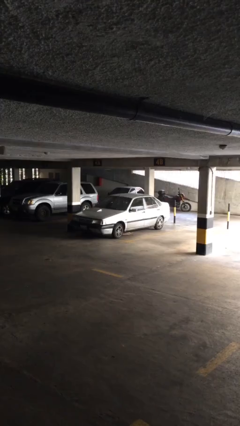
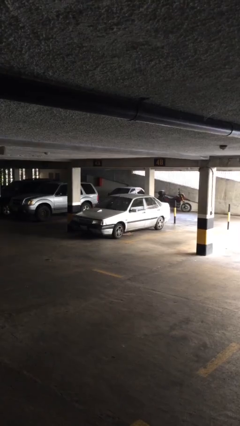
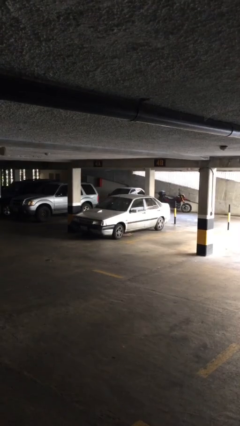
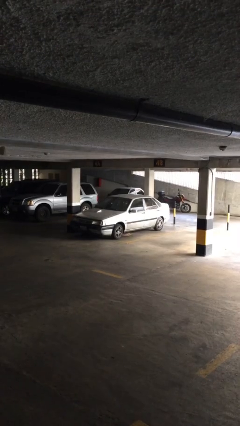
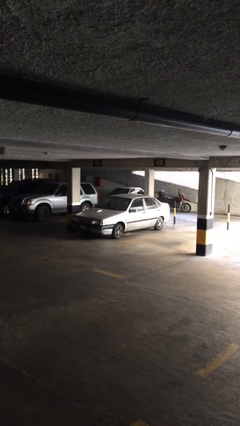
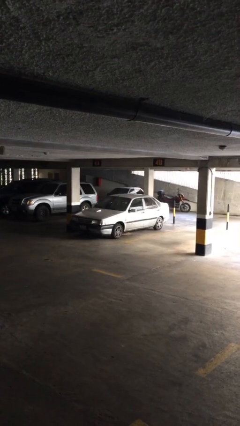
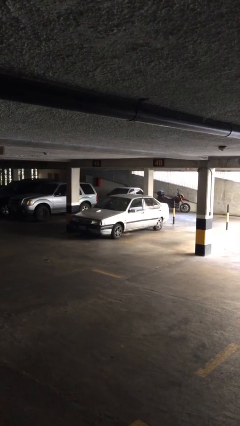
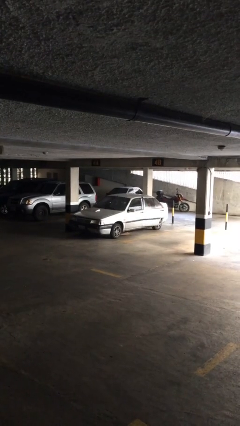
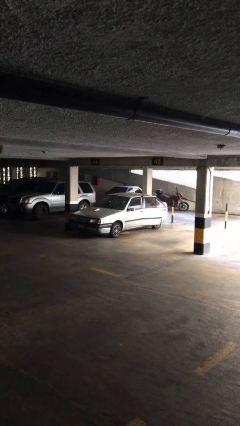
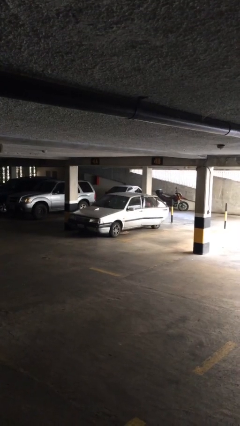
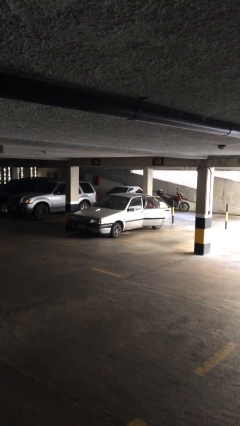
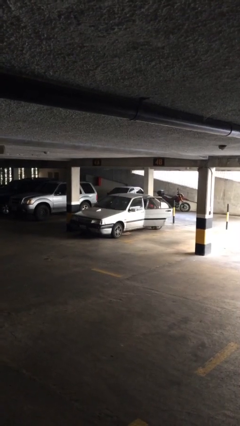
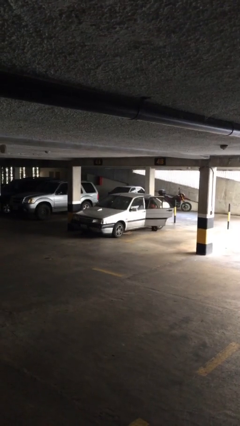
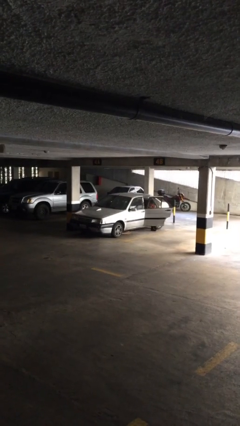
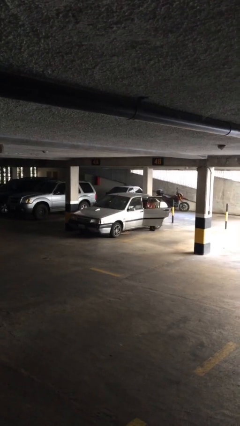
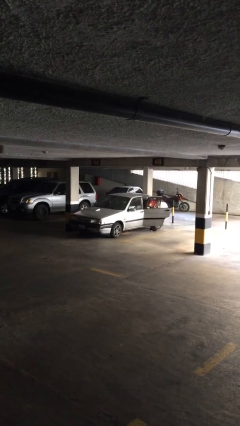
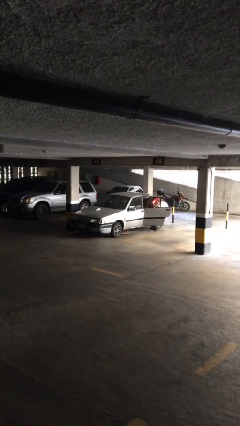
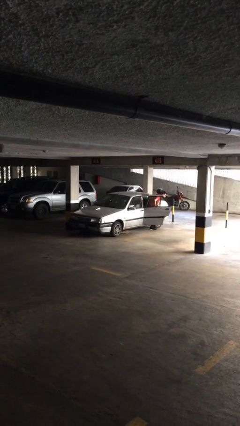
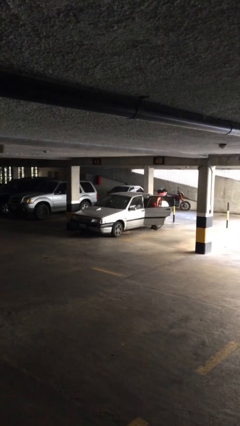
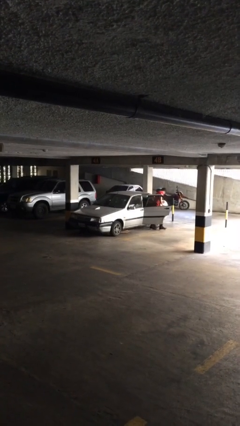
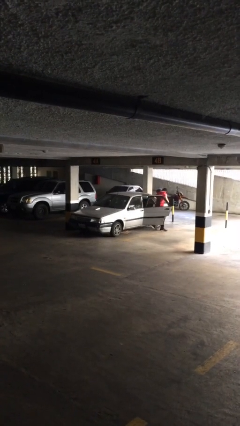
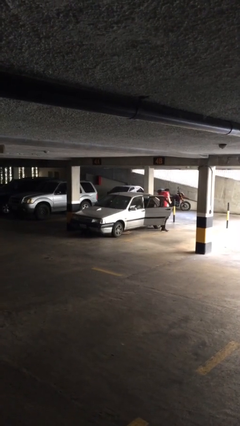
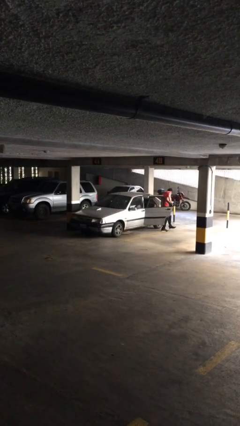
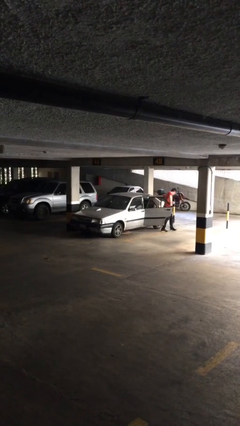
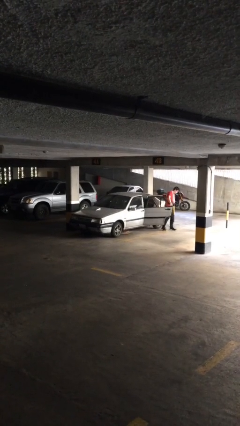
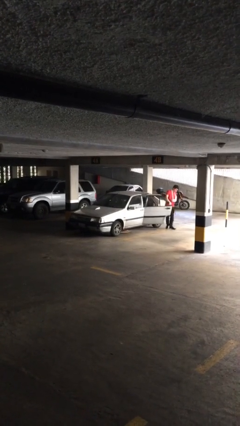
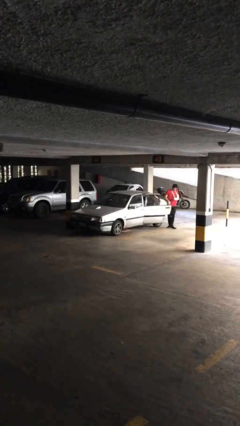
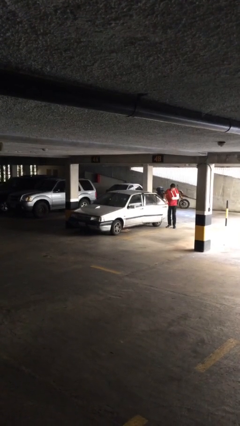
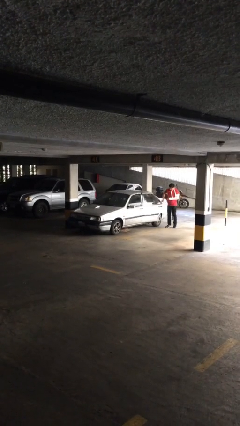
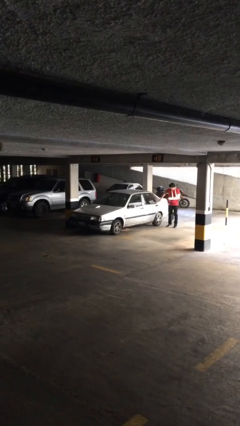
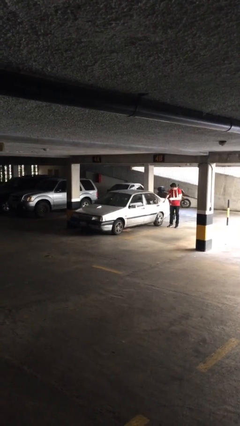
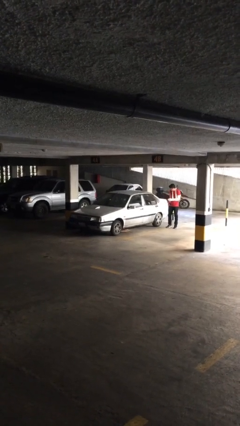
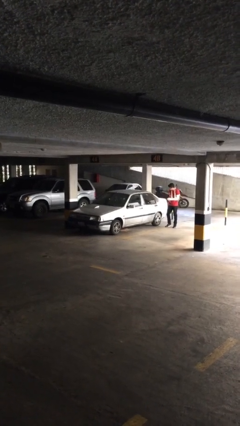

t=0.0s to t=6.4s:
car drops off person

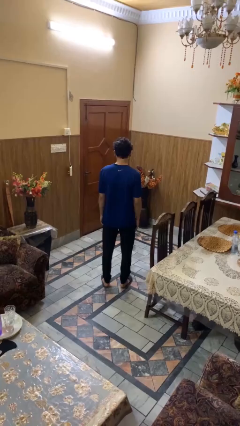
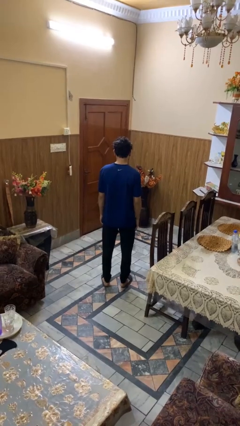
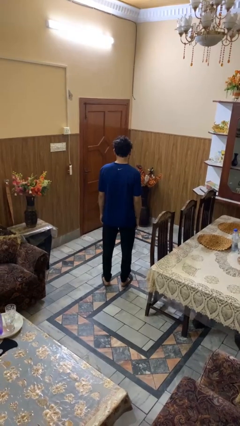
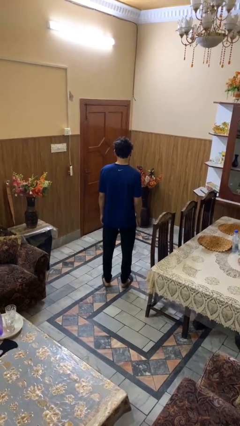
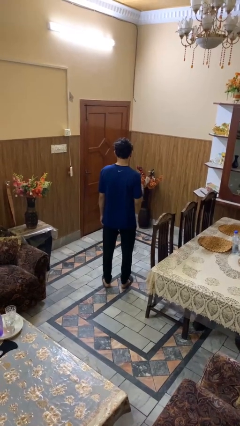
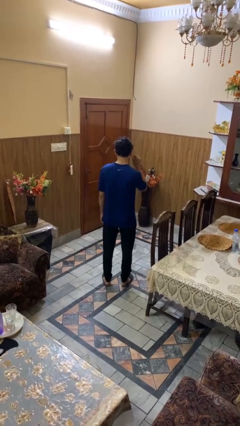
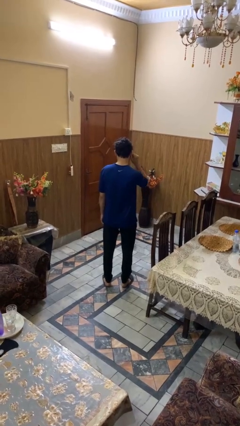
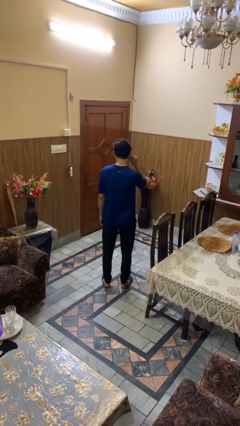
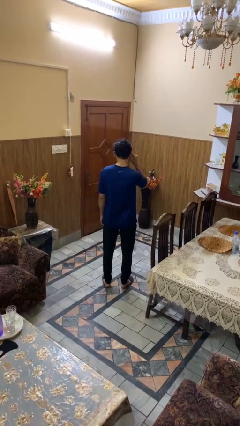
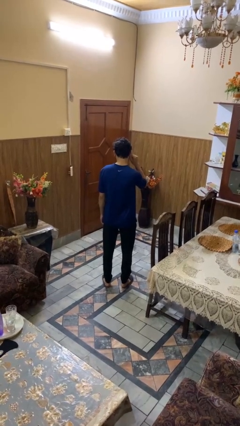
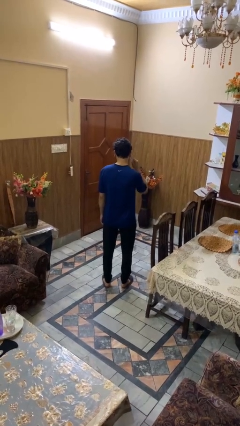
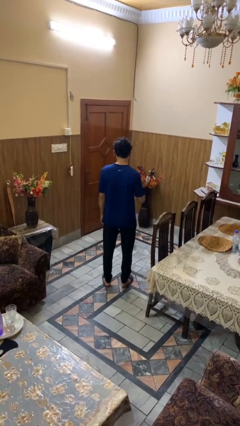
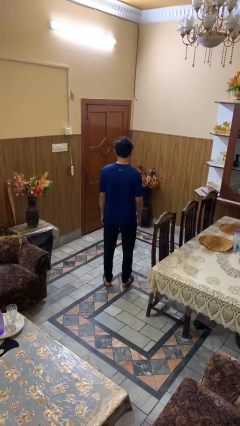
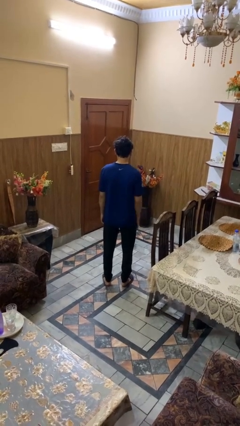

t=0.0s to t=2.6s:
person touches earlobe

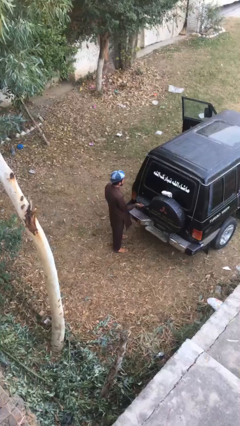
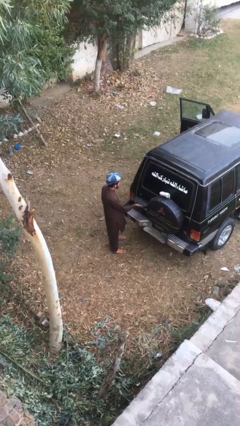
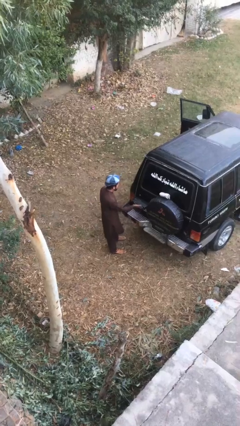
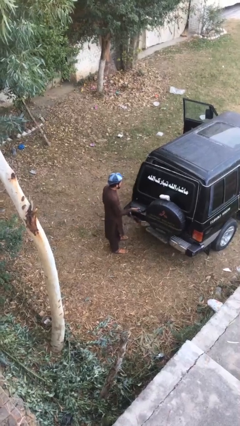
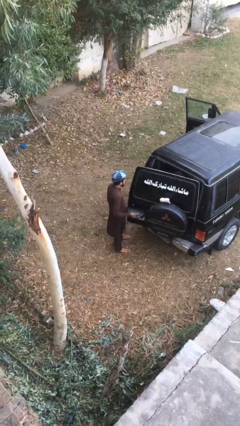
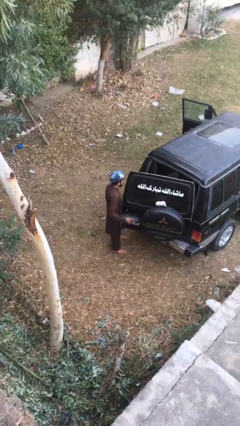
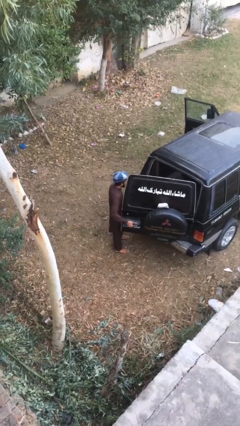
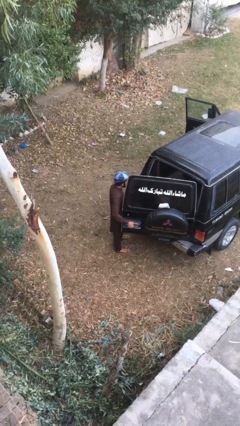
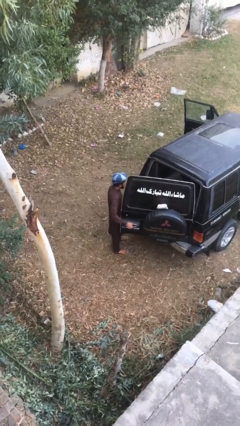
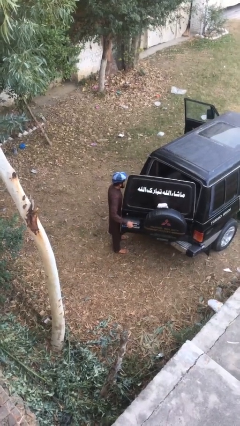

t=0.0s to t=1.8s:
person opens car trunk

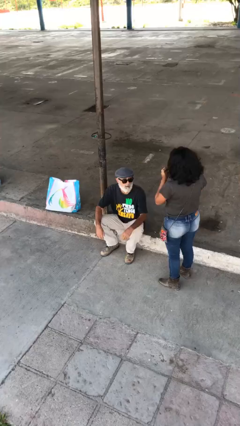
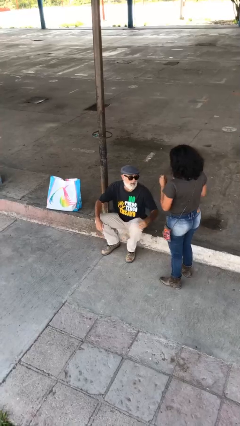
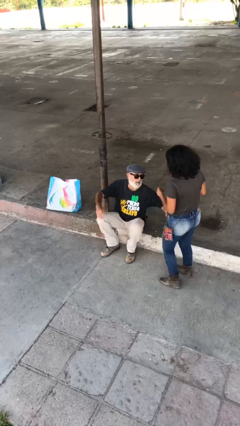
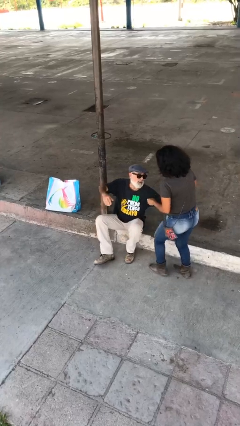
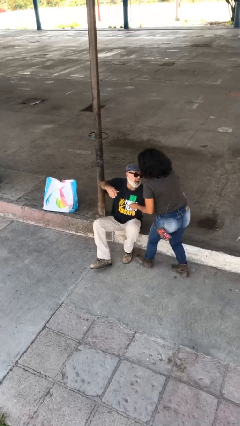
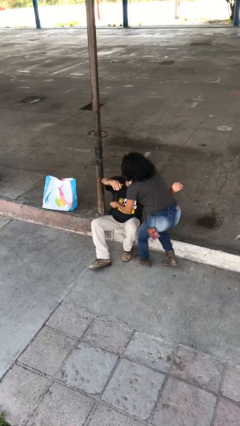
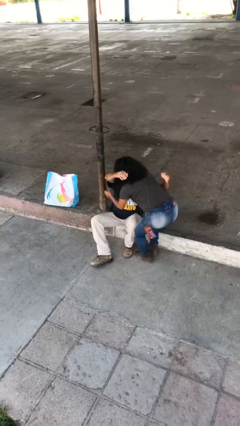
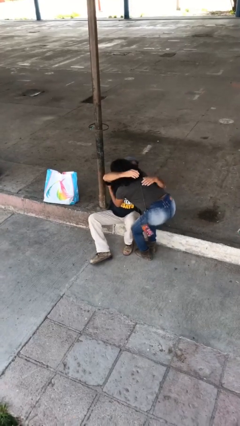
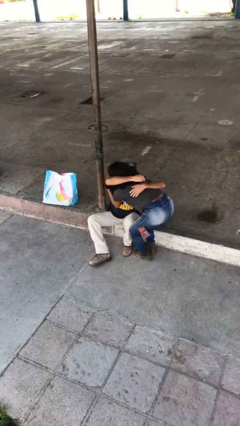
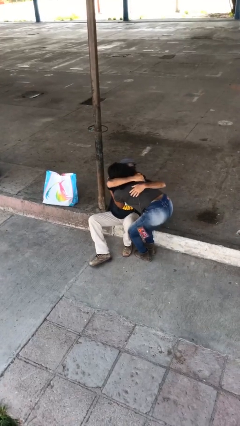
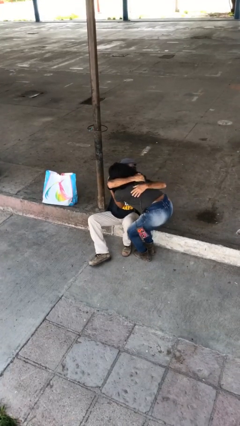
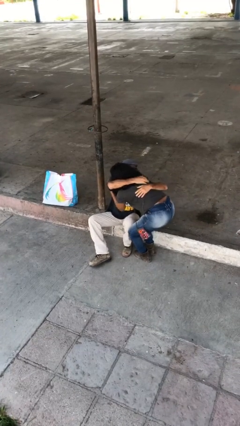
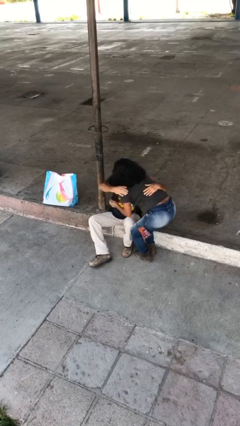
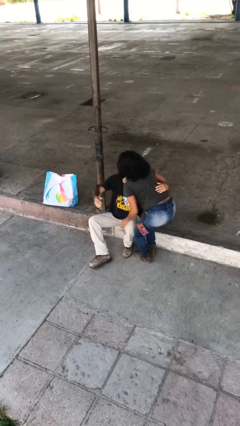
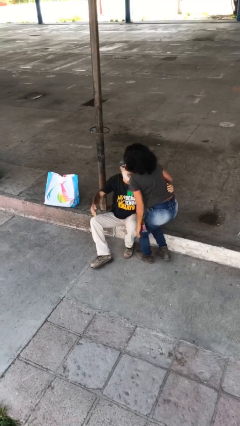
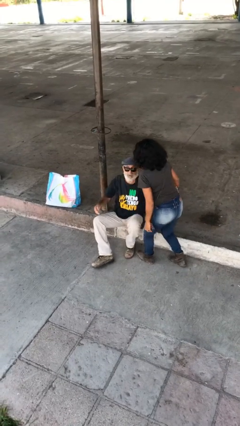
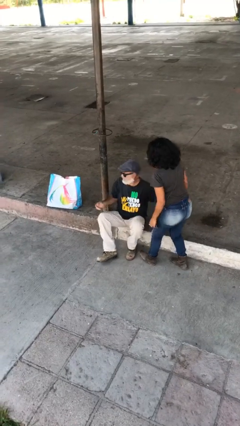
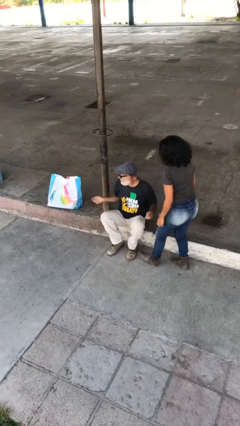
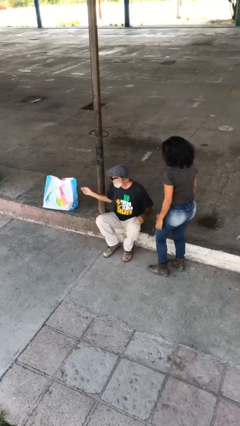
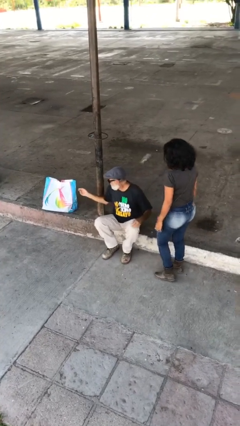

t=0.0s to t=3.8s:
person embraces person

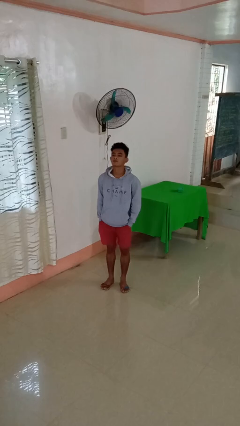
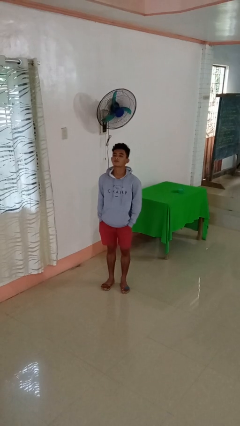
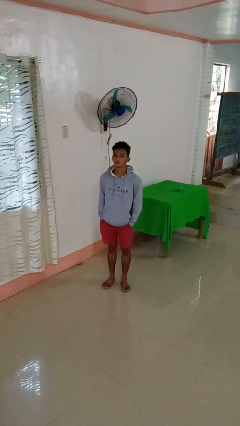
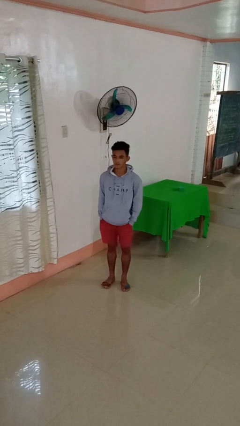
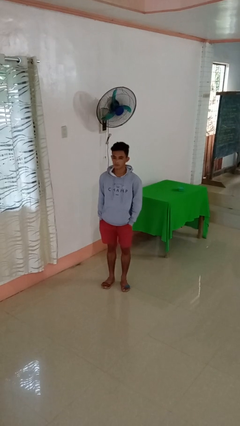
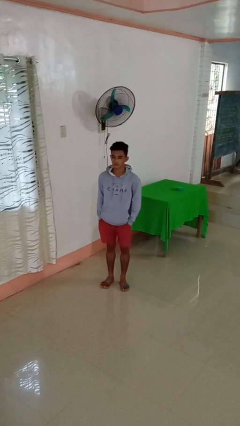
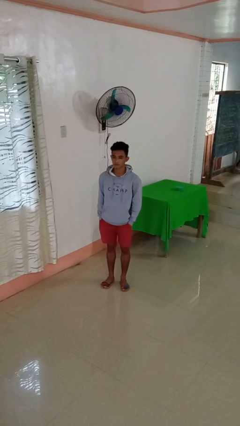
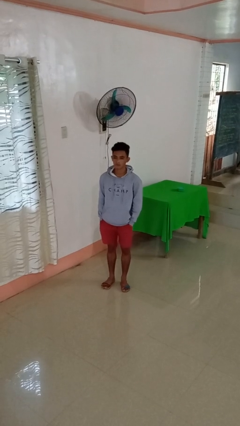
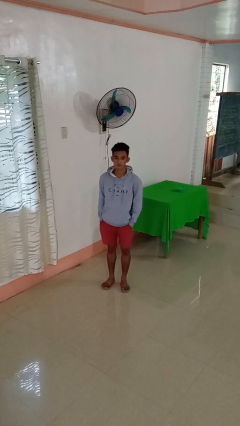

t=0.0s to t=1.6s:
person nods head

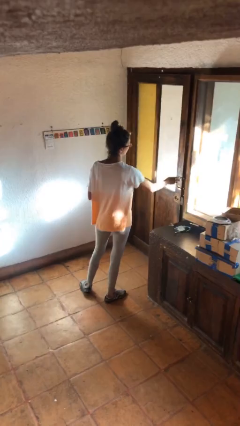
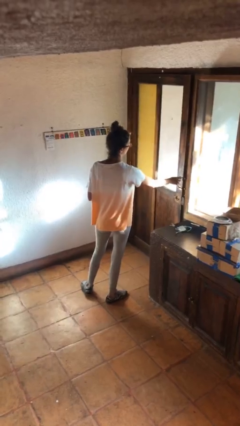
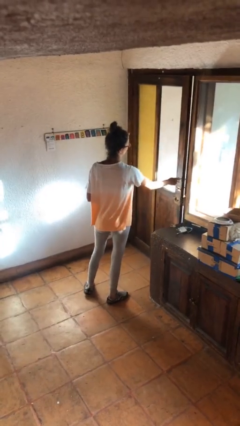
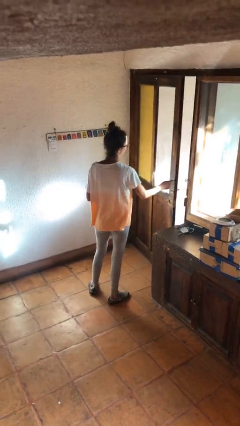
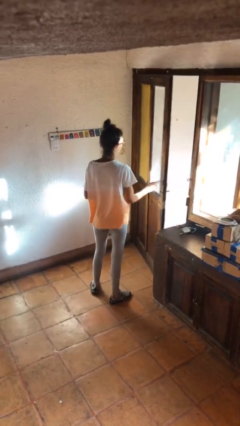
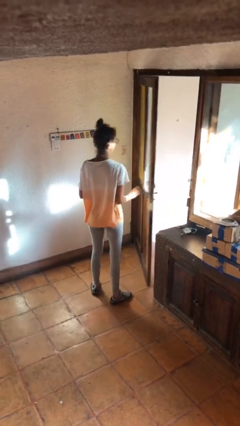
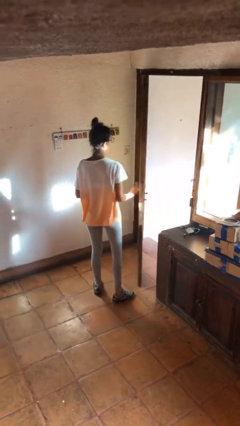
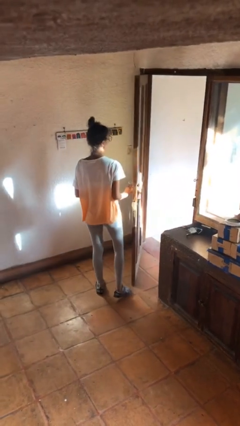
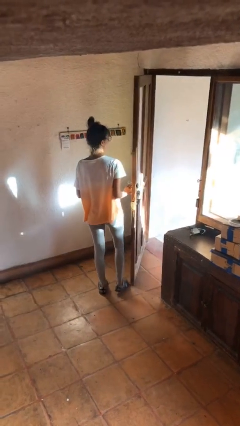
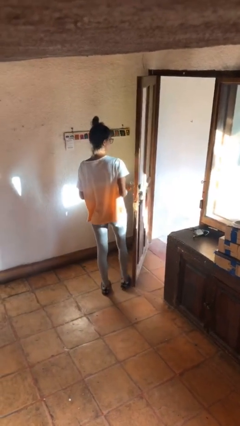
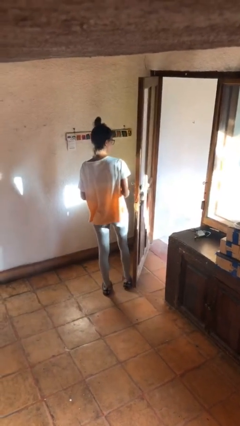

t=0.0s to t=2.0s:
person opens facility door
